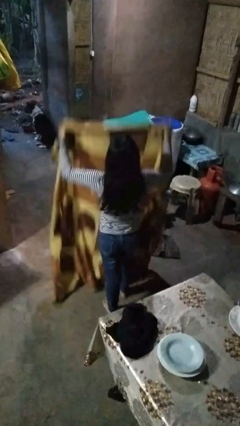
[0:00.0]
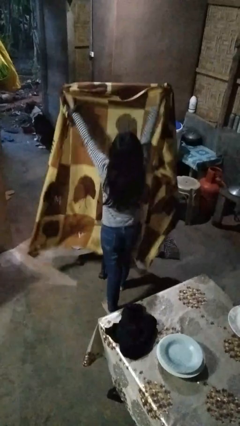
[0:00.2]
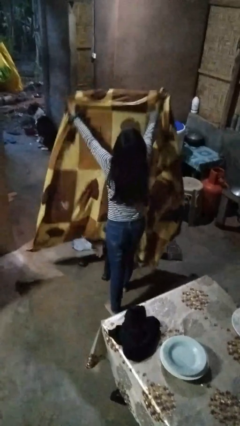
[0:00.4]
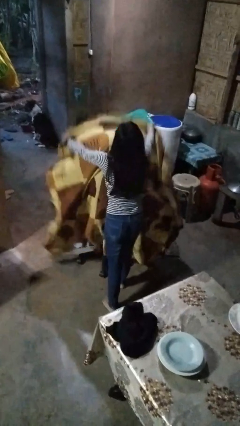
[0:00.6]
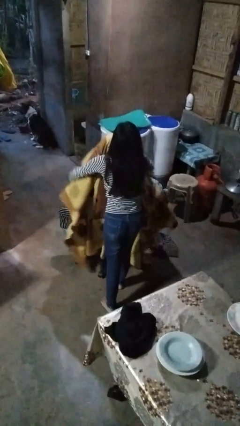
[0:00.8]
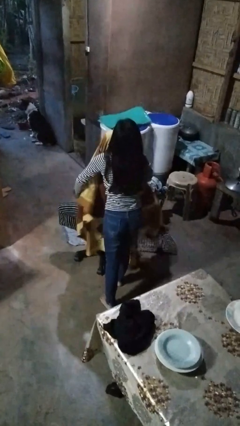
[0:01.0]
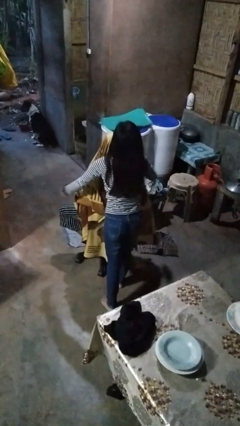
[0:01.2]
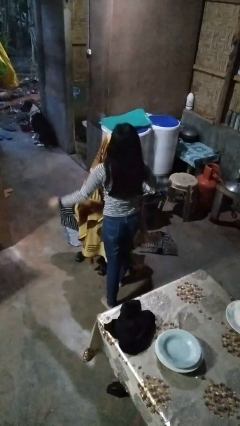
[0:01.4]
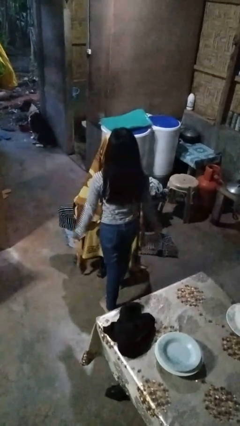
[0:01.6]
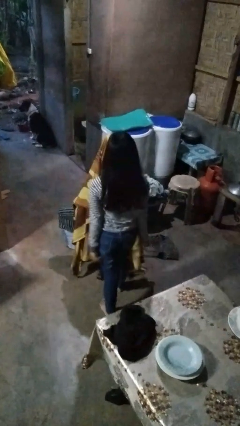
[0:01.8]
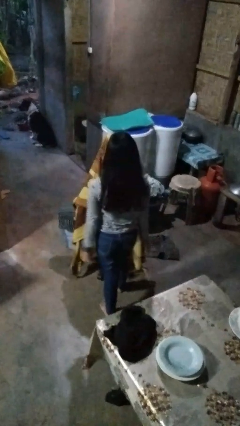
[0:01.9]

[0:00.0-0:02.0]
person covers friend with blanket

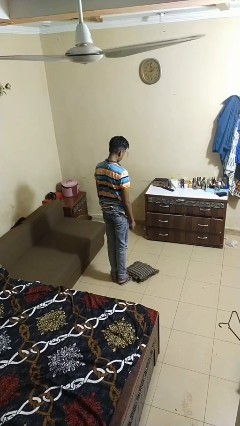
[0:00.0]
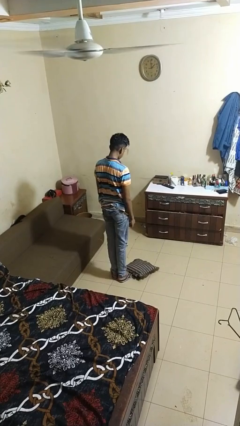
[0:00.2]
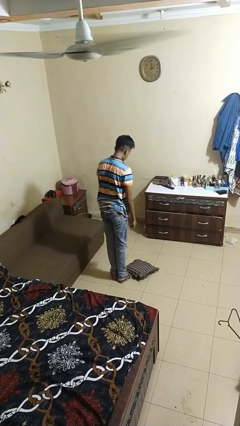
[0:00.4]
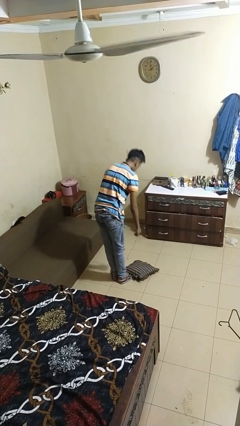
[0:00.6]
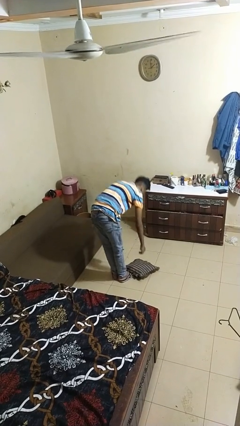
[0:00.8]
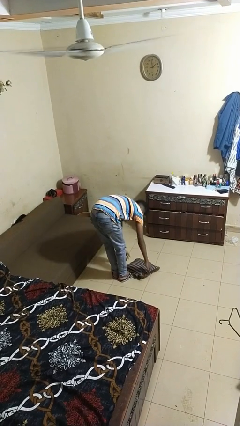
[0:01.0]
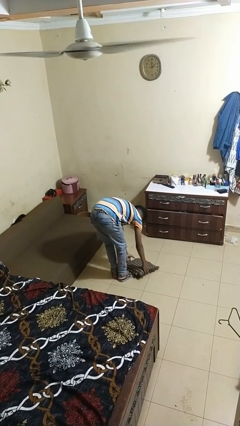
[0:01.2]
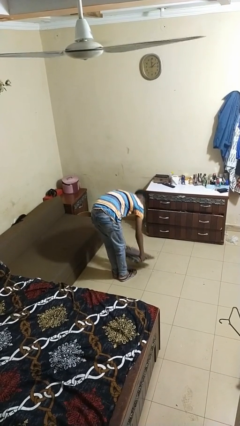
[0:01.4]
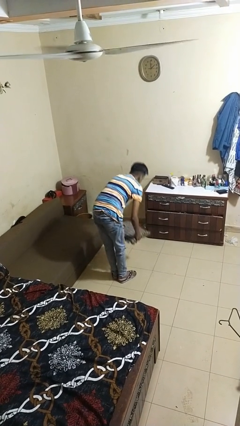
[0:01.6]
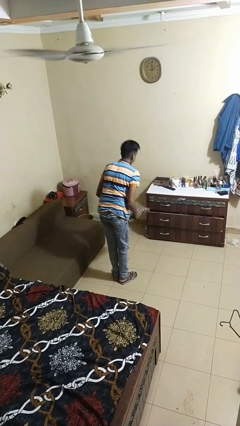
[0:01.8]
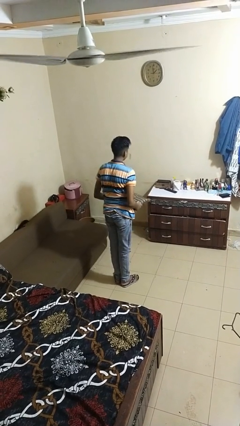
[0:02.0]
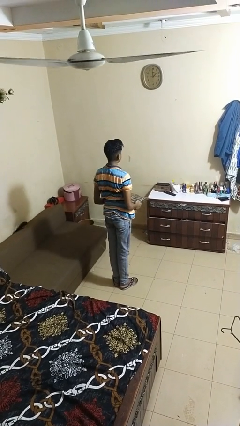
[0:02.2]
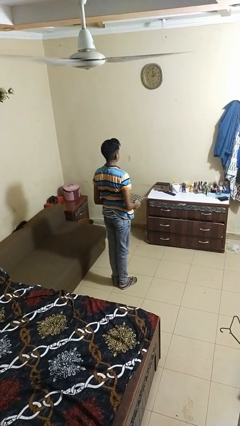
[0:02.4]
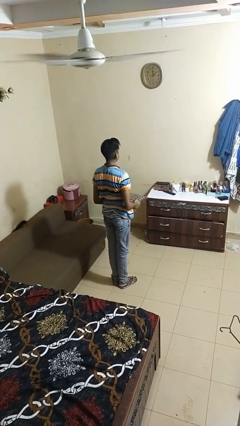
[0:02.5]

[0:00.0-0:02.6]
person picks up object from floor

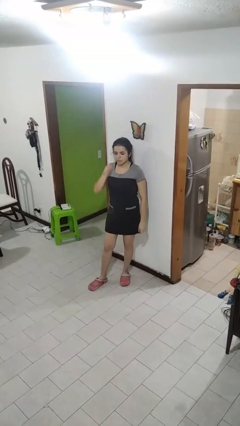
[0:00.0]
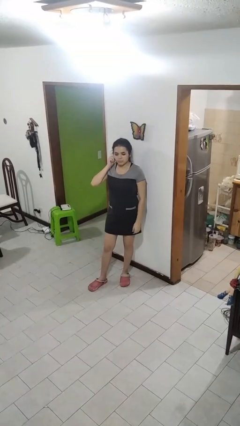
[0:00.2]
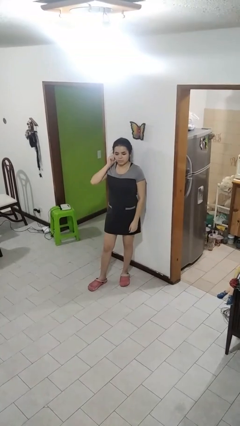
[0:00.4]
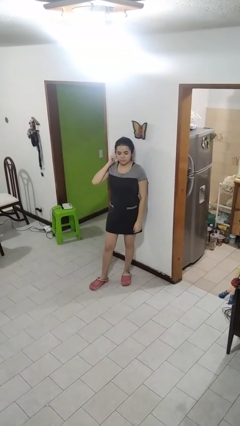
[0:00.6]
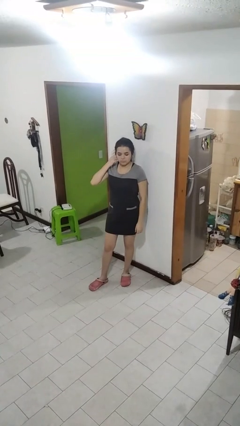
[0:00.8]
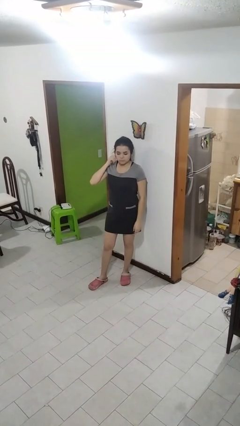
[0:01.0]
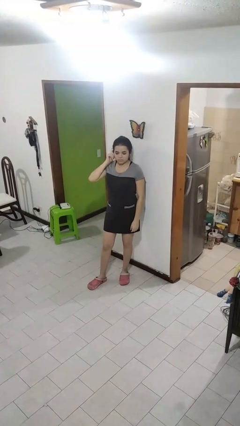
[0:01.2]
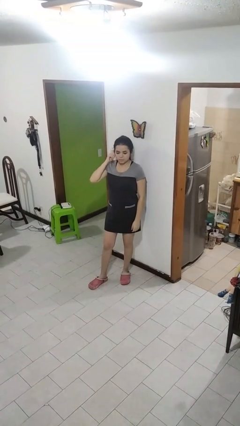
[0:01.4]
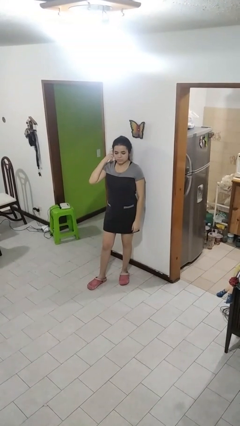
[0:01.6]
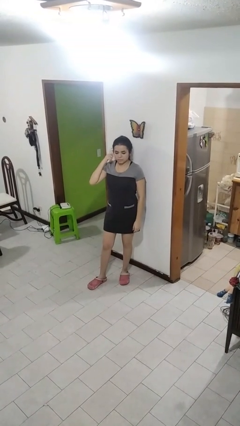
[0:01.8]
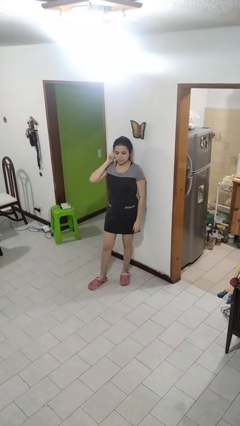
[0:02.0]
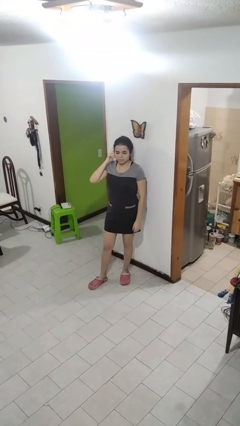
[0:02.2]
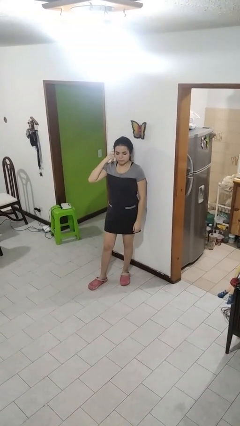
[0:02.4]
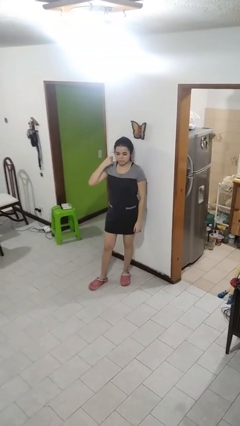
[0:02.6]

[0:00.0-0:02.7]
person touches earlobe

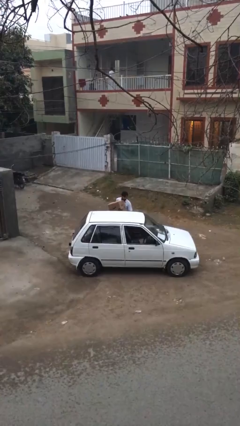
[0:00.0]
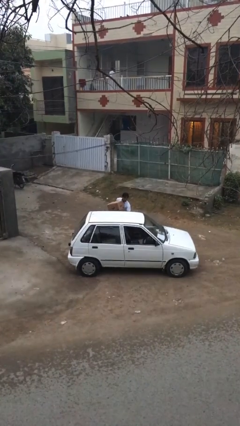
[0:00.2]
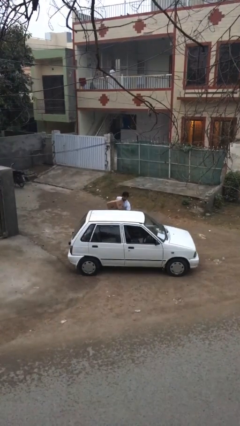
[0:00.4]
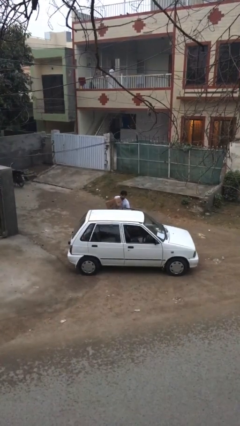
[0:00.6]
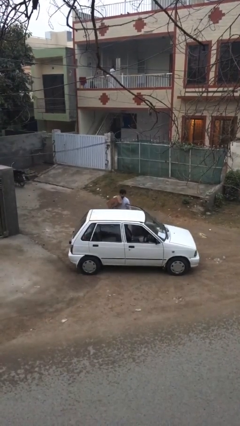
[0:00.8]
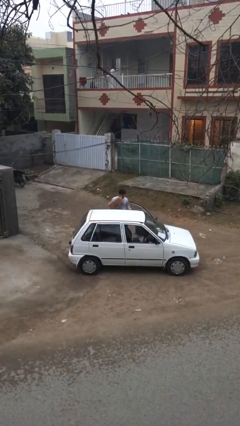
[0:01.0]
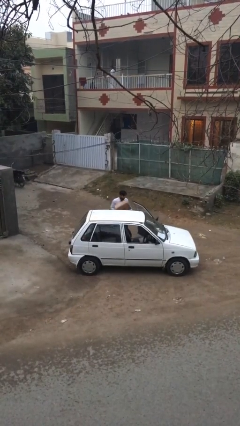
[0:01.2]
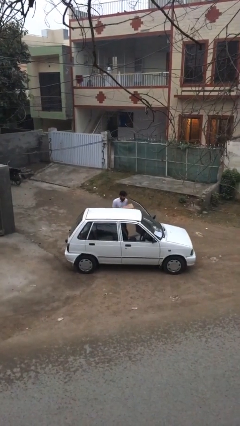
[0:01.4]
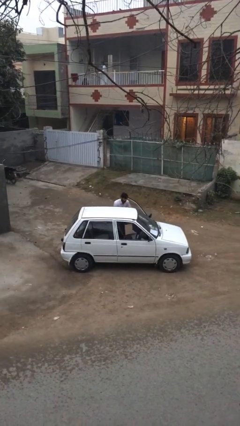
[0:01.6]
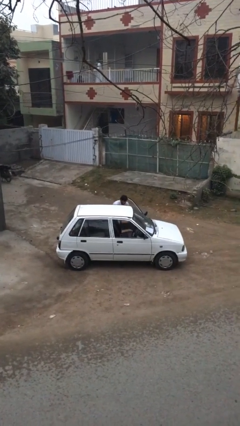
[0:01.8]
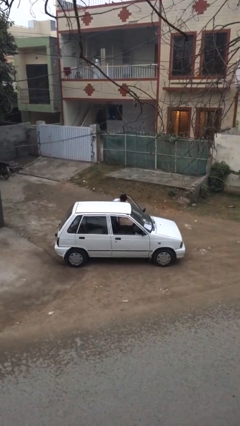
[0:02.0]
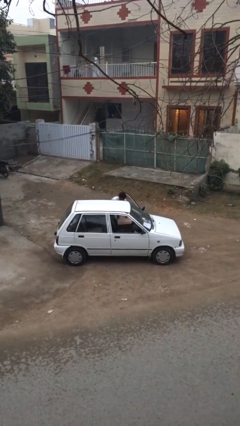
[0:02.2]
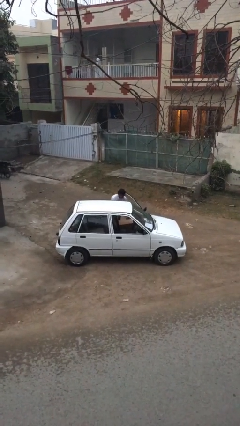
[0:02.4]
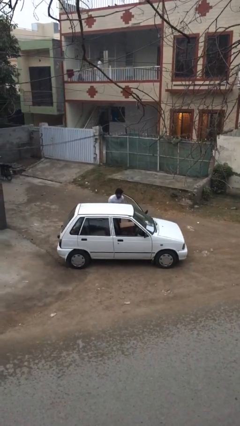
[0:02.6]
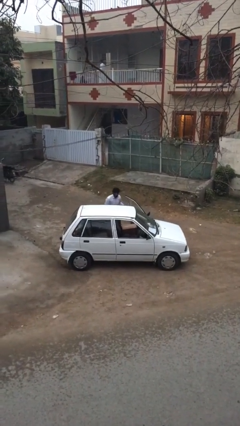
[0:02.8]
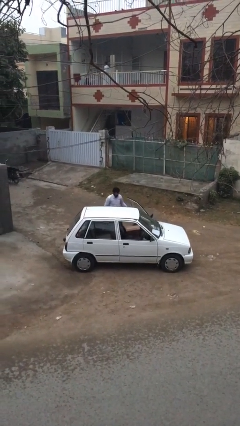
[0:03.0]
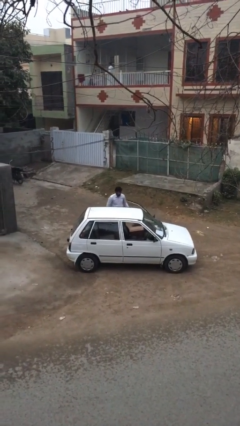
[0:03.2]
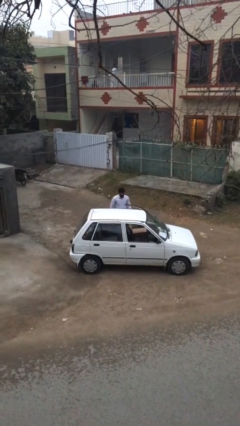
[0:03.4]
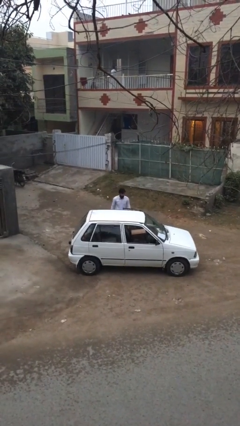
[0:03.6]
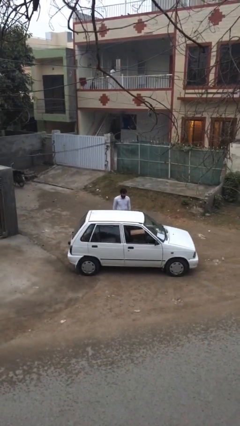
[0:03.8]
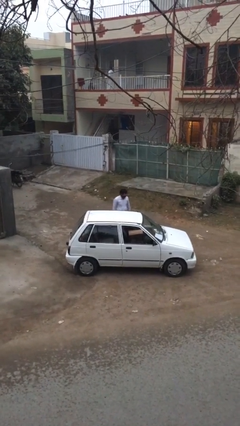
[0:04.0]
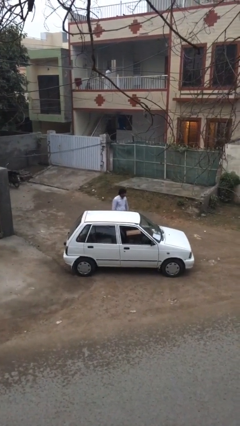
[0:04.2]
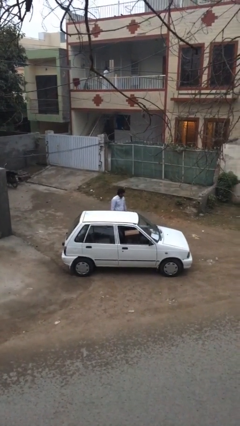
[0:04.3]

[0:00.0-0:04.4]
person loads car

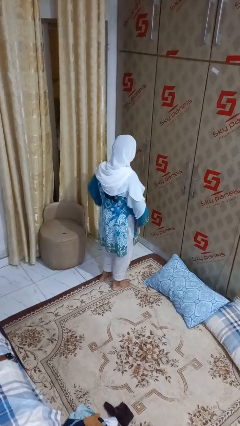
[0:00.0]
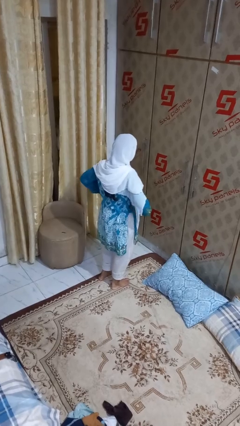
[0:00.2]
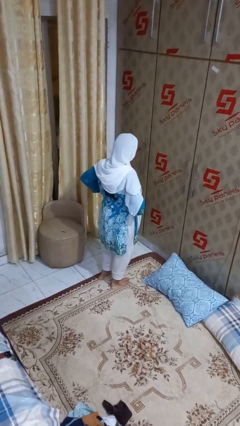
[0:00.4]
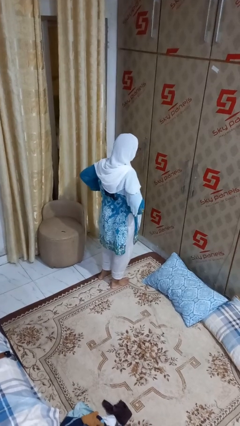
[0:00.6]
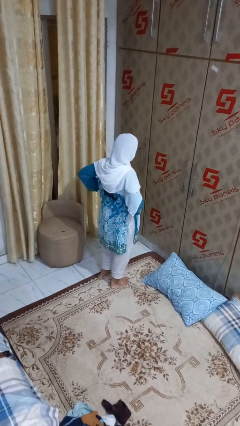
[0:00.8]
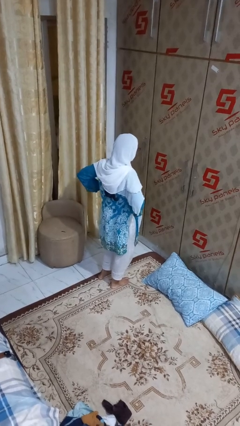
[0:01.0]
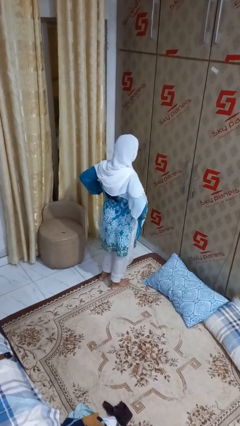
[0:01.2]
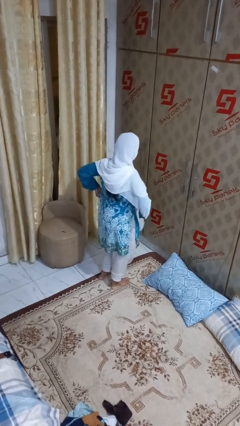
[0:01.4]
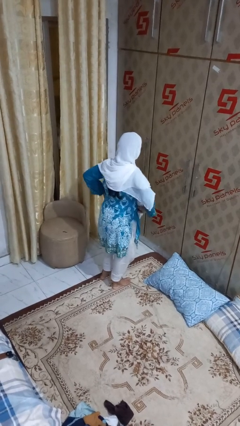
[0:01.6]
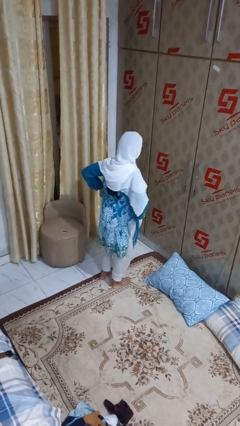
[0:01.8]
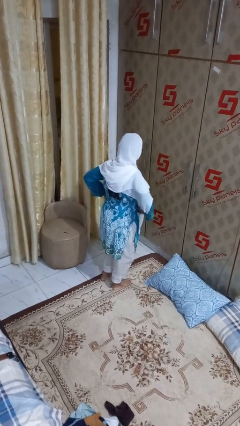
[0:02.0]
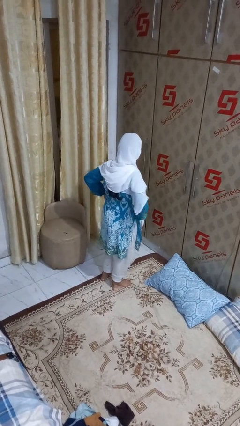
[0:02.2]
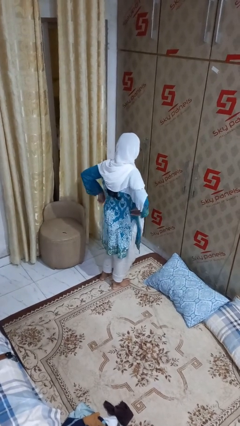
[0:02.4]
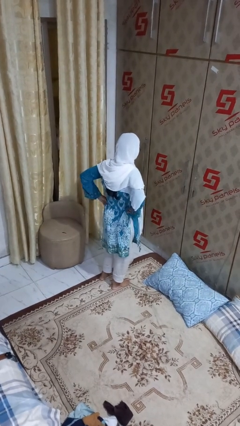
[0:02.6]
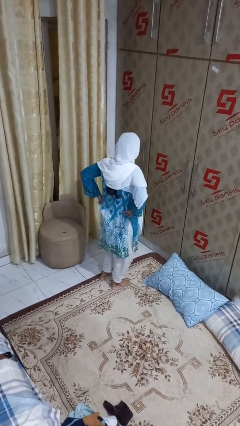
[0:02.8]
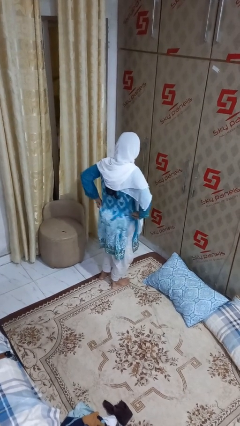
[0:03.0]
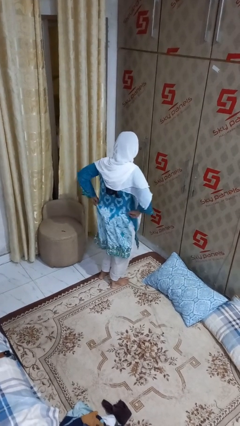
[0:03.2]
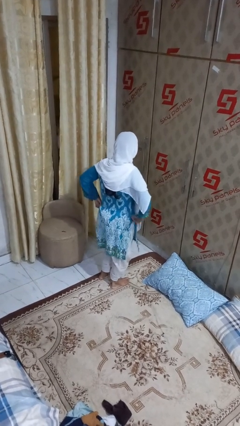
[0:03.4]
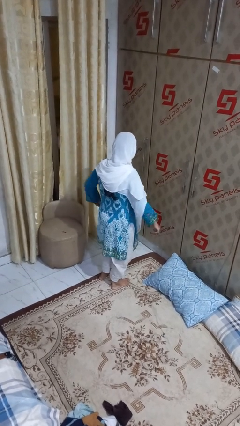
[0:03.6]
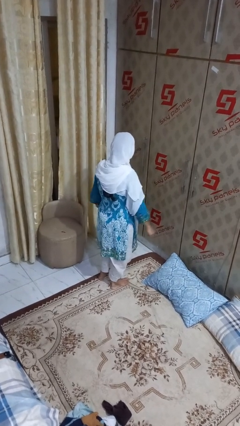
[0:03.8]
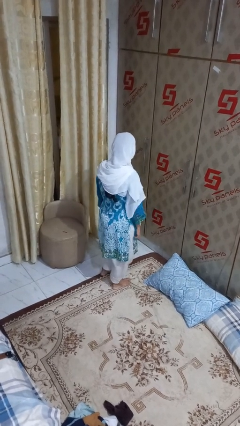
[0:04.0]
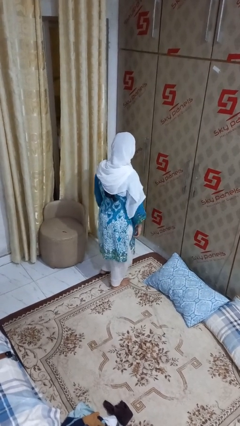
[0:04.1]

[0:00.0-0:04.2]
person hikes up pants

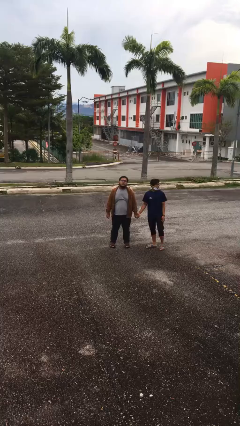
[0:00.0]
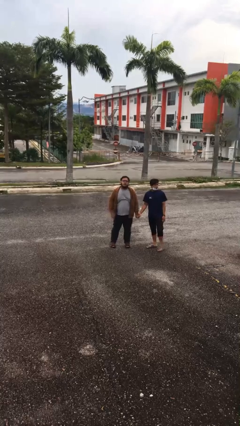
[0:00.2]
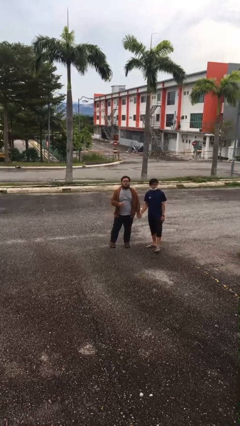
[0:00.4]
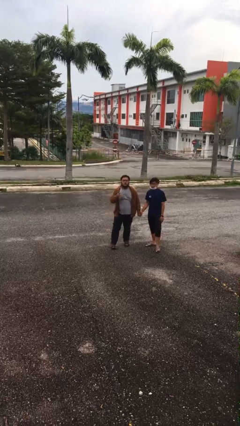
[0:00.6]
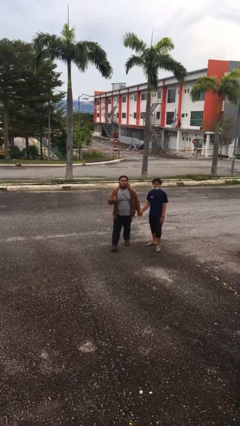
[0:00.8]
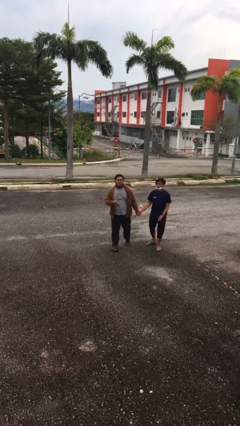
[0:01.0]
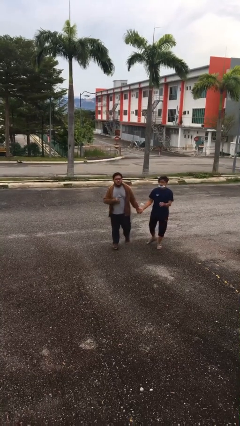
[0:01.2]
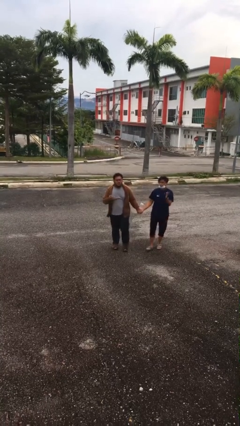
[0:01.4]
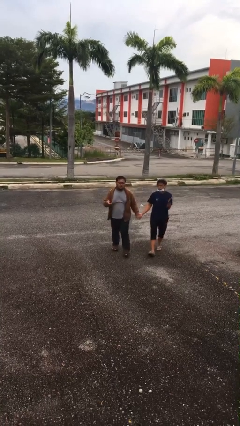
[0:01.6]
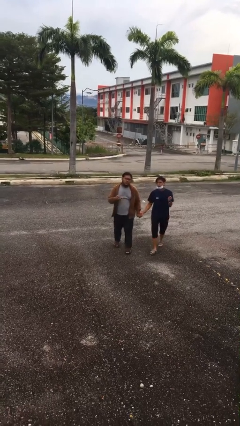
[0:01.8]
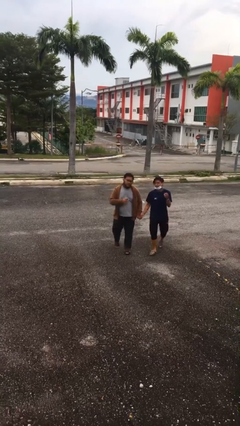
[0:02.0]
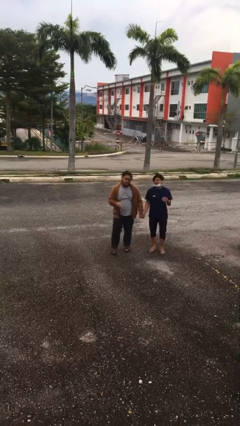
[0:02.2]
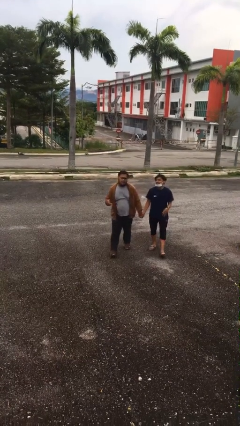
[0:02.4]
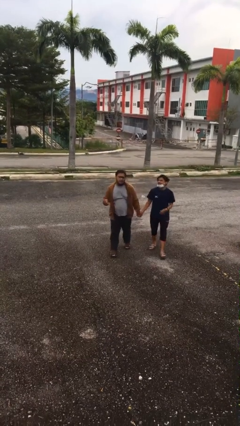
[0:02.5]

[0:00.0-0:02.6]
person holds hand
